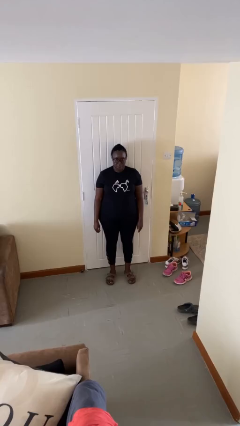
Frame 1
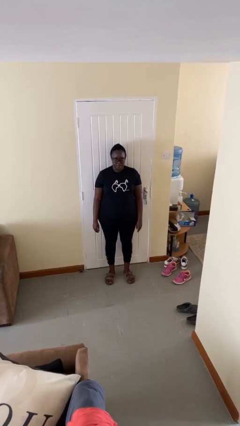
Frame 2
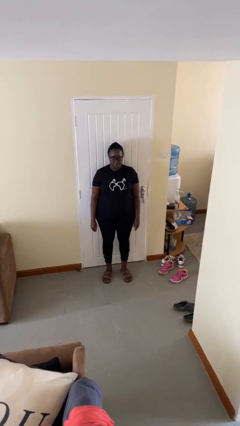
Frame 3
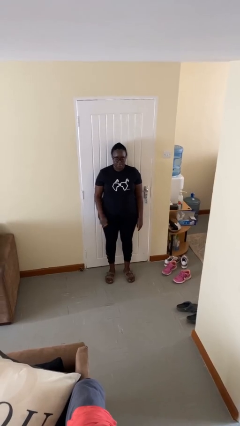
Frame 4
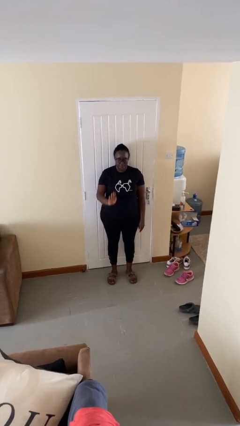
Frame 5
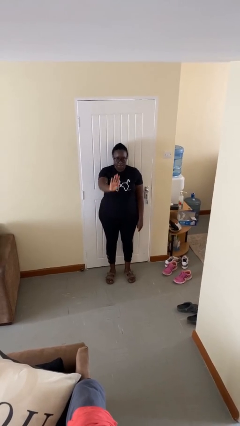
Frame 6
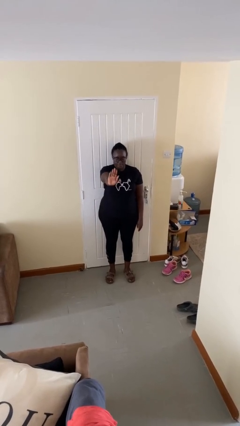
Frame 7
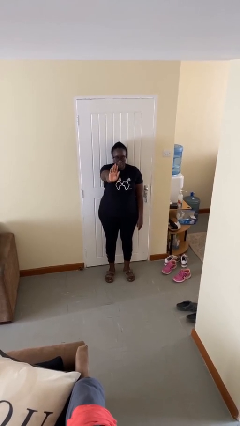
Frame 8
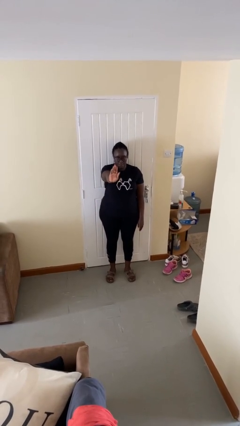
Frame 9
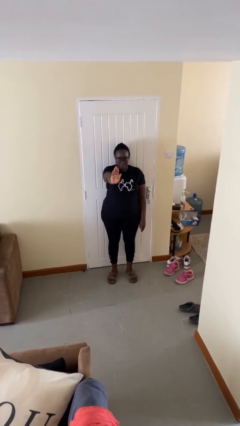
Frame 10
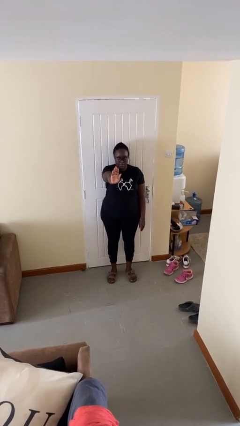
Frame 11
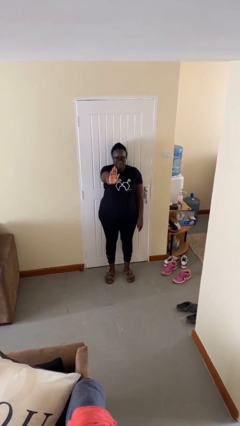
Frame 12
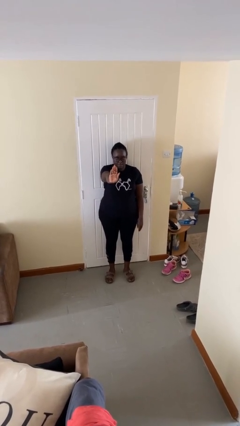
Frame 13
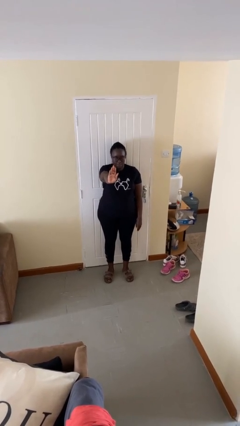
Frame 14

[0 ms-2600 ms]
person gestures stop

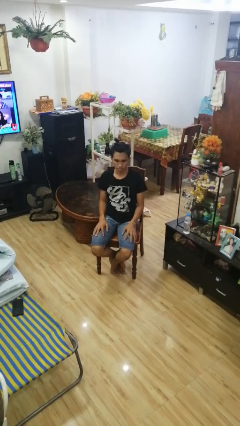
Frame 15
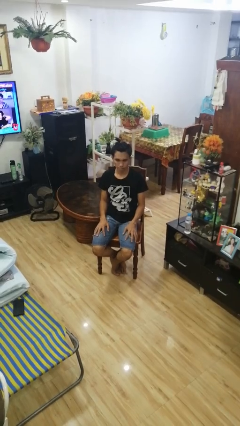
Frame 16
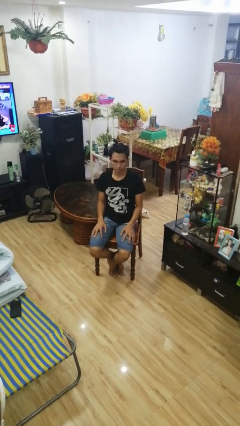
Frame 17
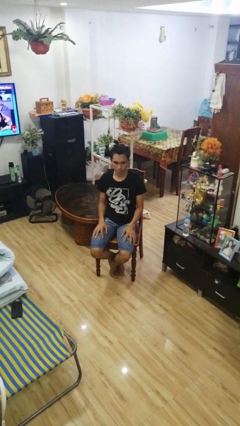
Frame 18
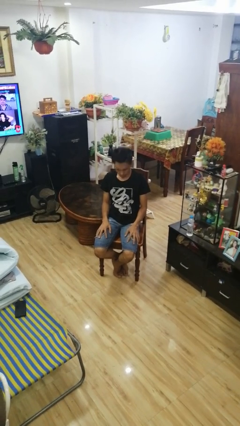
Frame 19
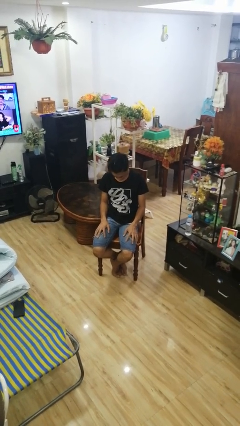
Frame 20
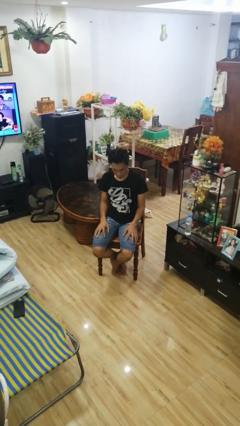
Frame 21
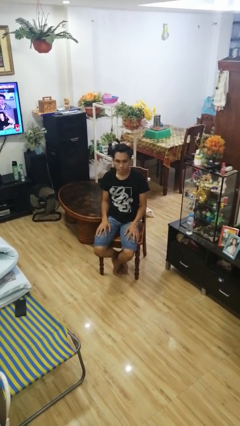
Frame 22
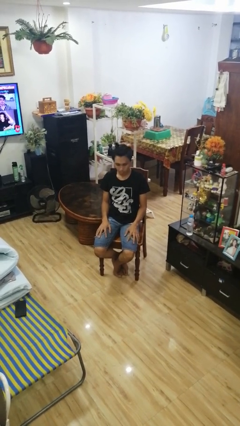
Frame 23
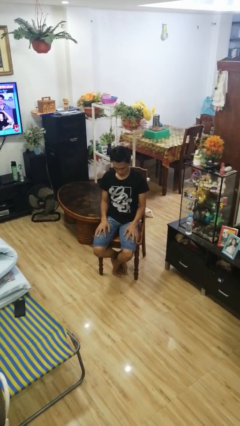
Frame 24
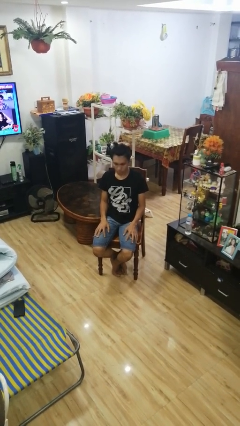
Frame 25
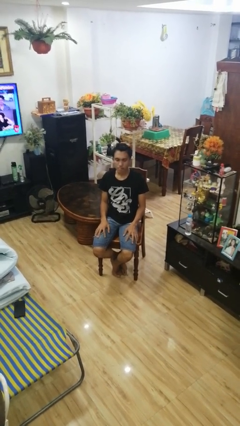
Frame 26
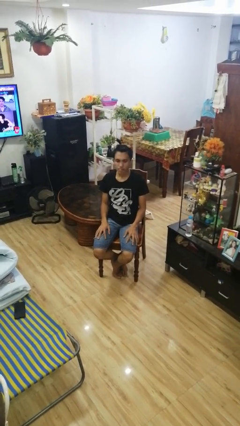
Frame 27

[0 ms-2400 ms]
person nods head

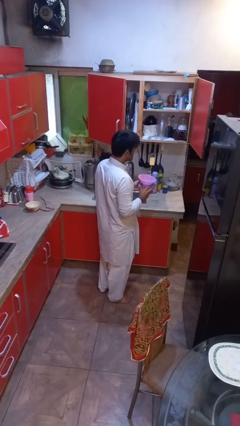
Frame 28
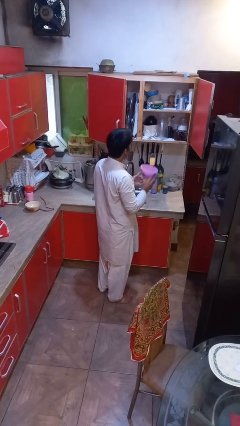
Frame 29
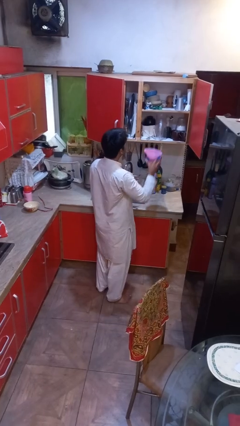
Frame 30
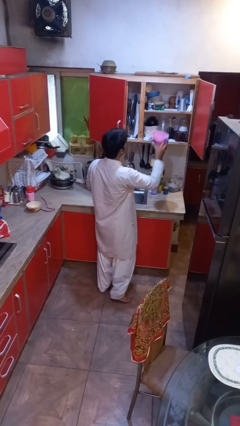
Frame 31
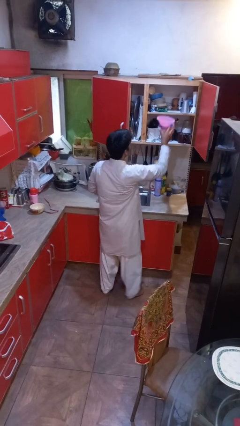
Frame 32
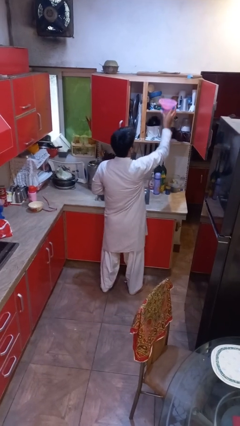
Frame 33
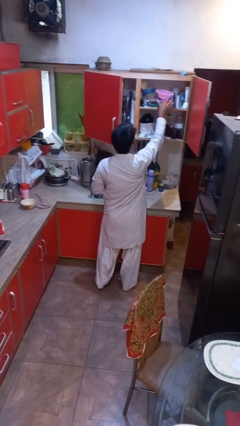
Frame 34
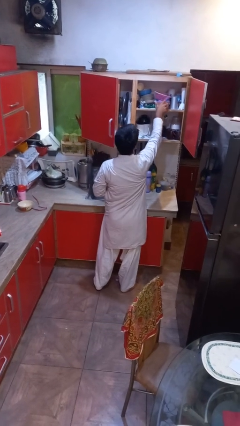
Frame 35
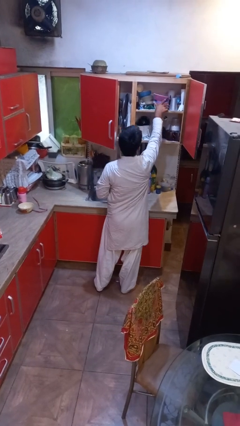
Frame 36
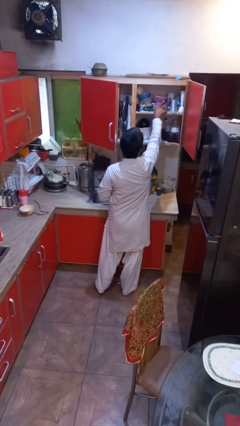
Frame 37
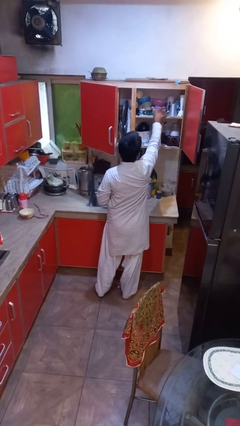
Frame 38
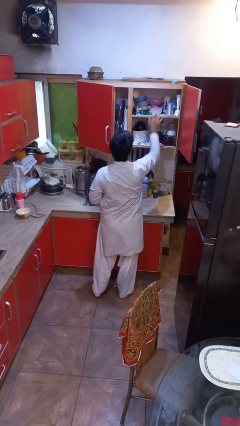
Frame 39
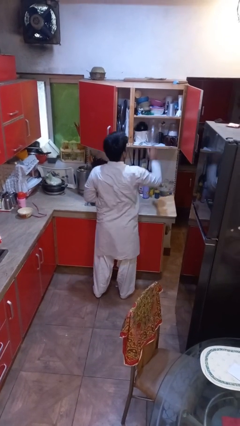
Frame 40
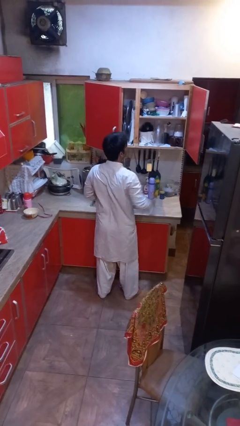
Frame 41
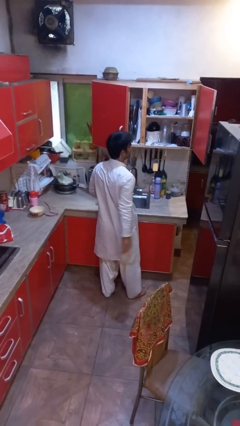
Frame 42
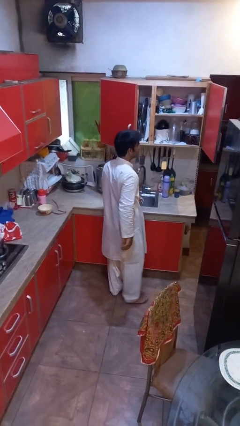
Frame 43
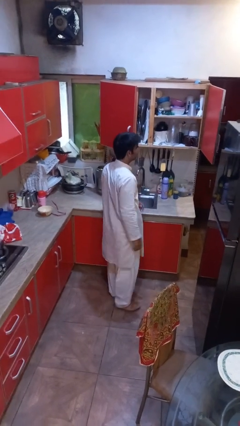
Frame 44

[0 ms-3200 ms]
person puts down object into cabinet

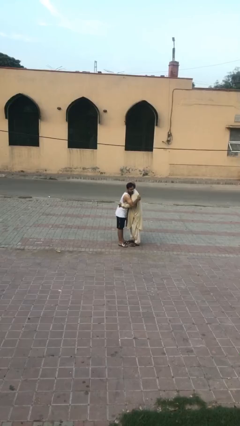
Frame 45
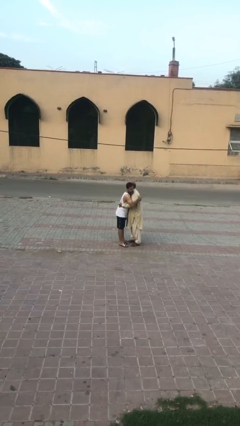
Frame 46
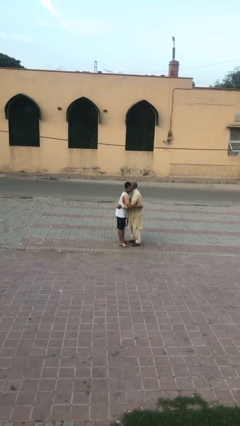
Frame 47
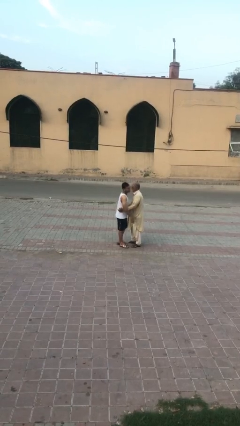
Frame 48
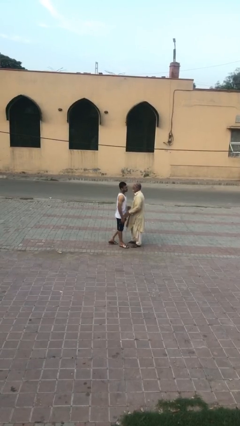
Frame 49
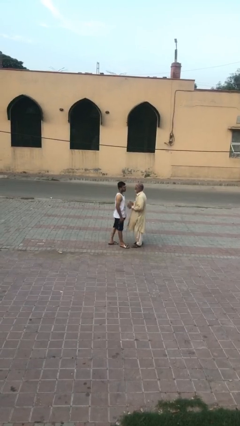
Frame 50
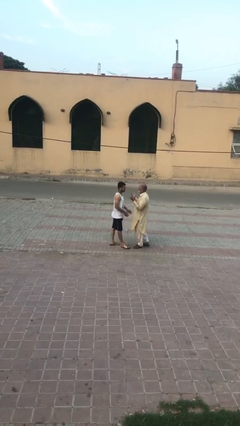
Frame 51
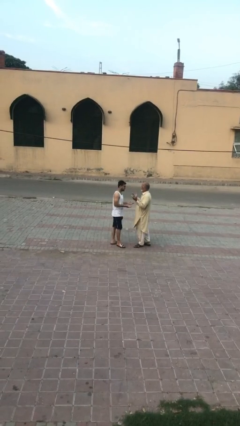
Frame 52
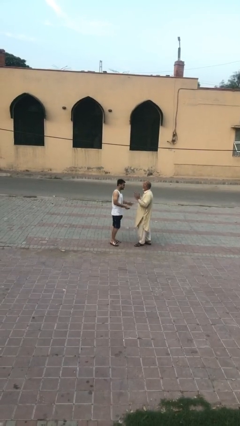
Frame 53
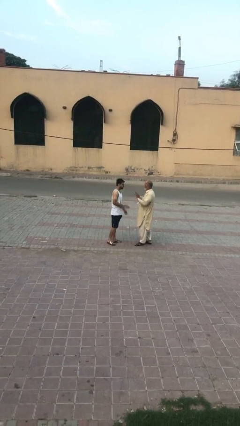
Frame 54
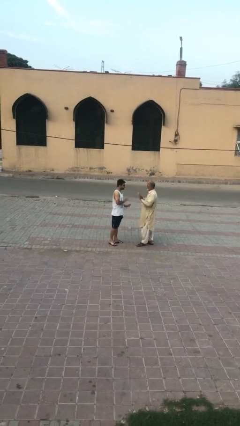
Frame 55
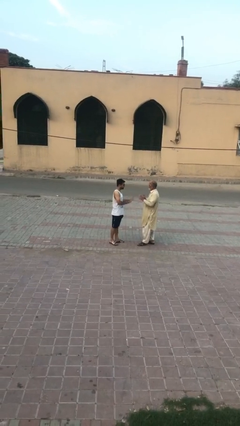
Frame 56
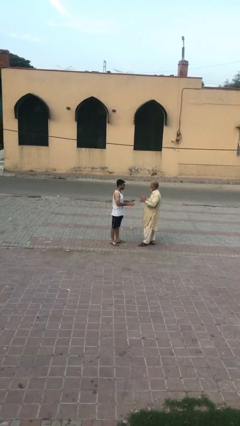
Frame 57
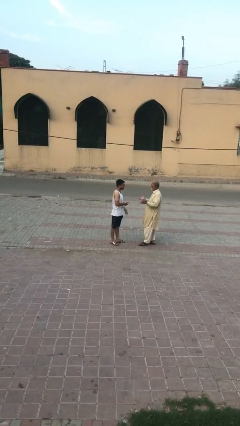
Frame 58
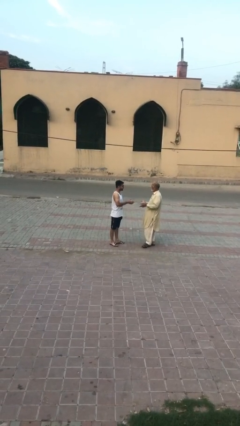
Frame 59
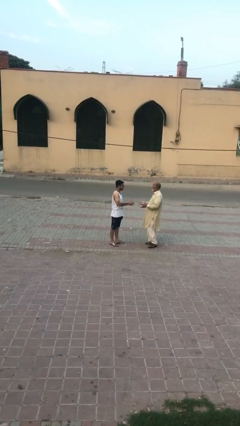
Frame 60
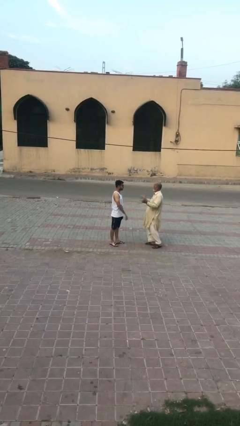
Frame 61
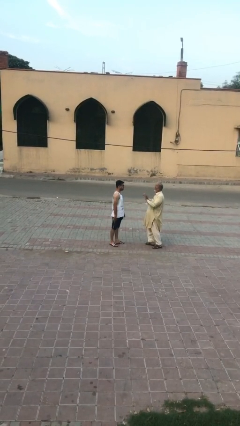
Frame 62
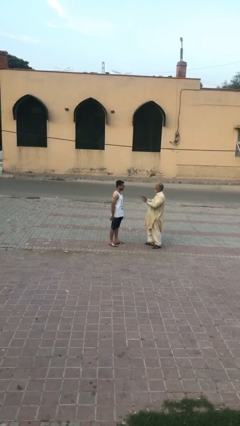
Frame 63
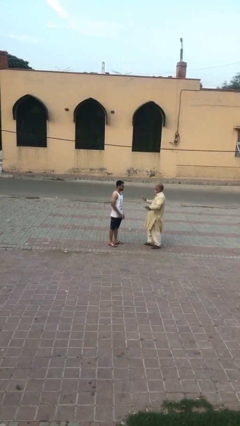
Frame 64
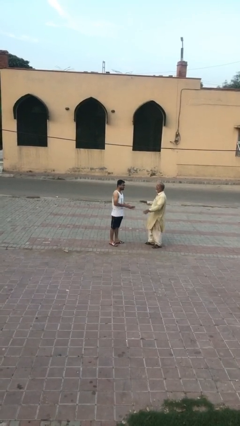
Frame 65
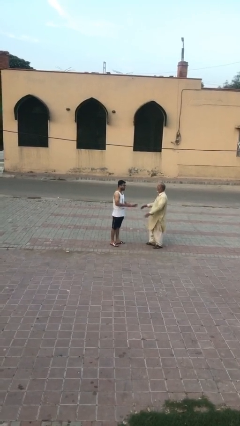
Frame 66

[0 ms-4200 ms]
person talks to person

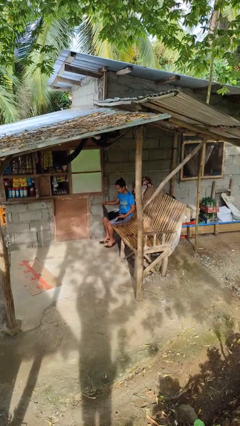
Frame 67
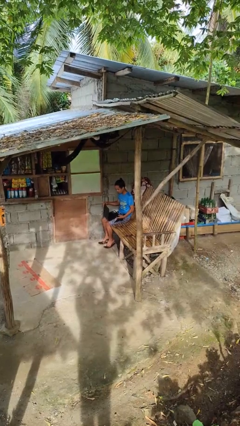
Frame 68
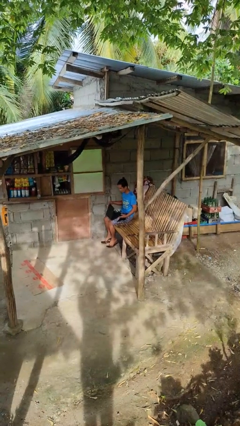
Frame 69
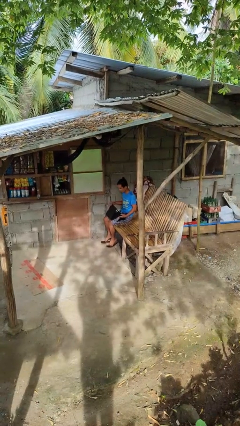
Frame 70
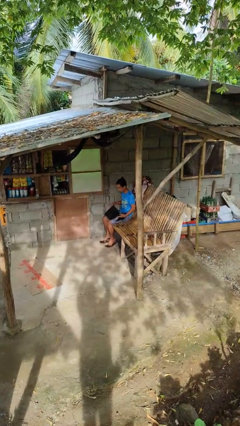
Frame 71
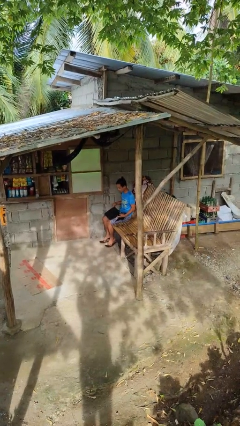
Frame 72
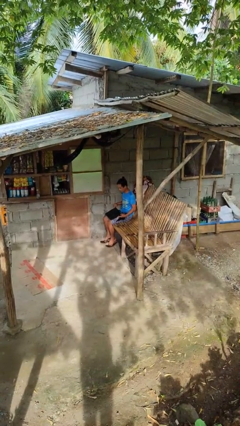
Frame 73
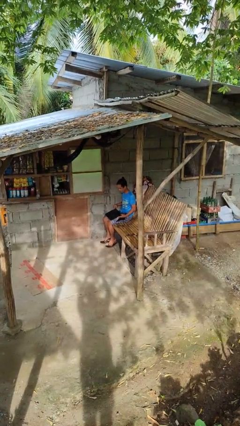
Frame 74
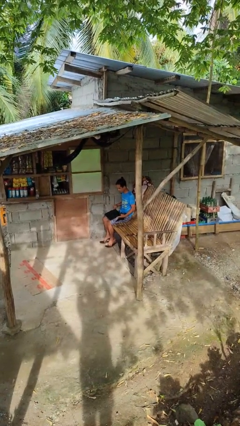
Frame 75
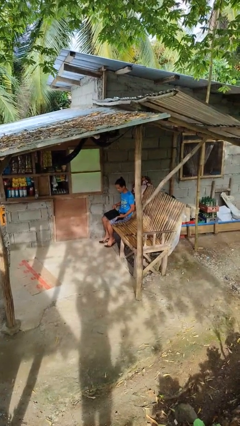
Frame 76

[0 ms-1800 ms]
person closes laptop

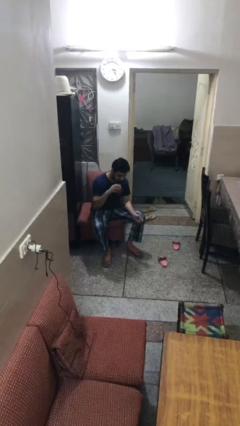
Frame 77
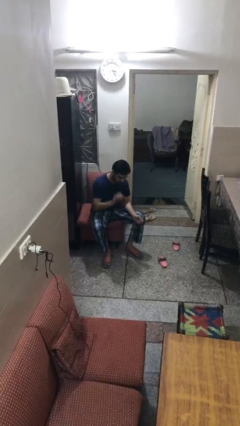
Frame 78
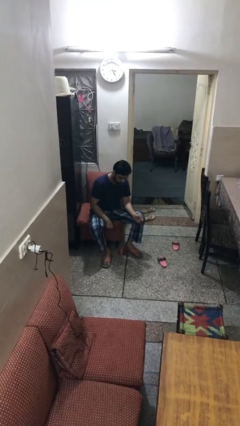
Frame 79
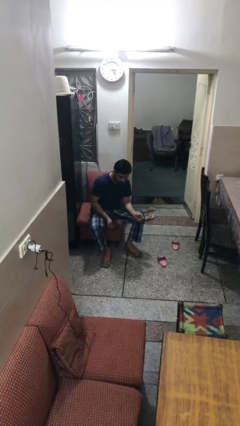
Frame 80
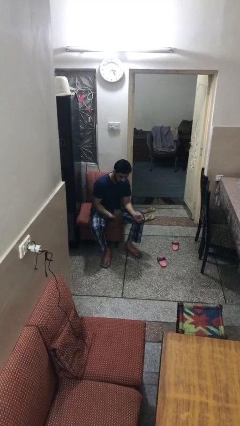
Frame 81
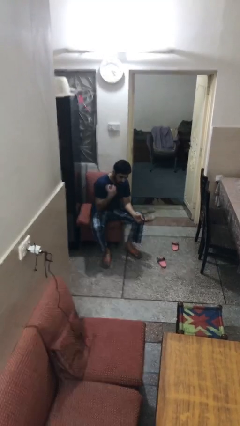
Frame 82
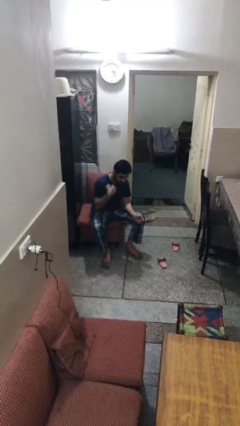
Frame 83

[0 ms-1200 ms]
person bounces ball on floor

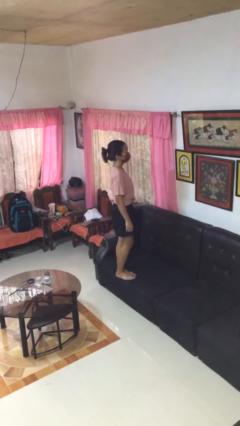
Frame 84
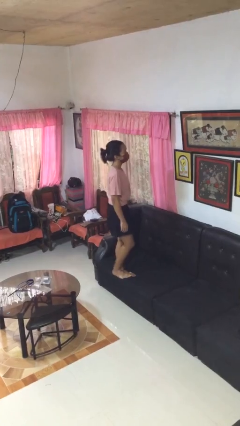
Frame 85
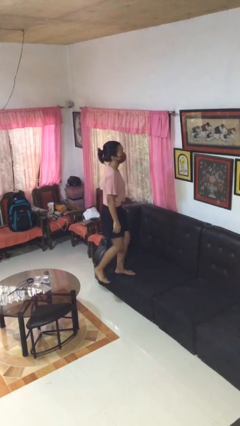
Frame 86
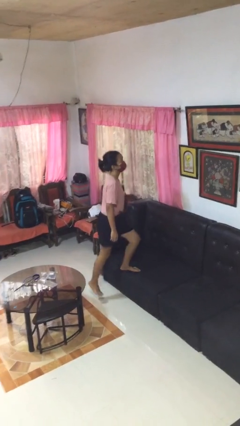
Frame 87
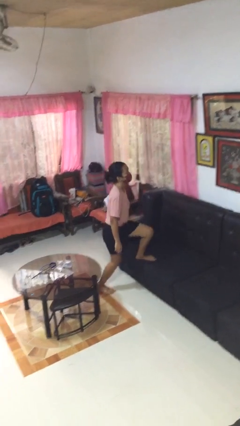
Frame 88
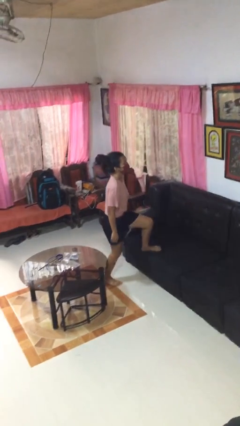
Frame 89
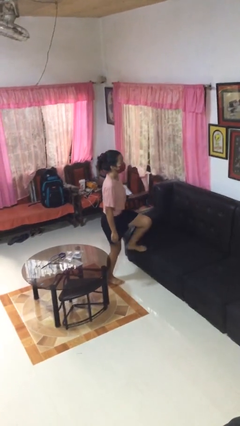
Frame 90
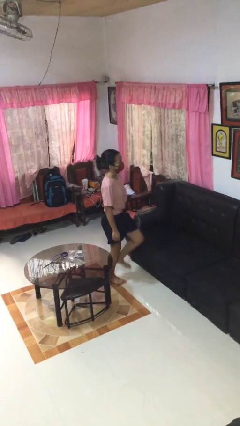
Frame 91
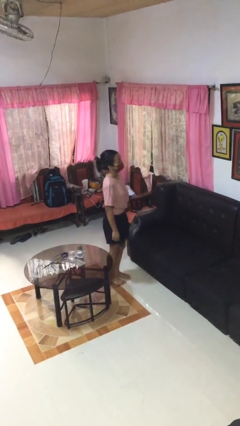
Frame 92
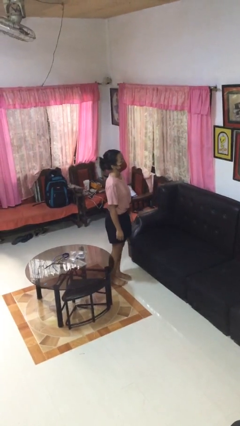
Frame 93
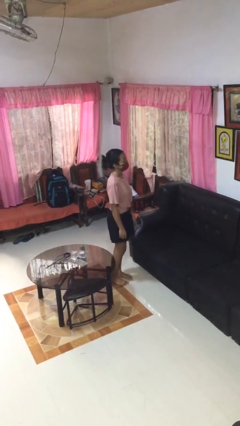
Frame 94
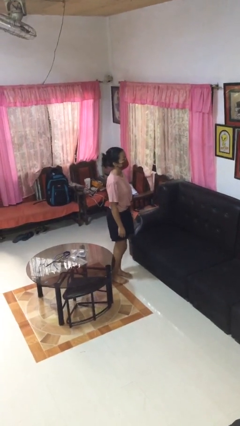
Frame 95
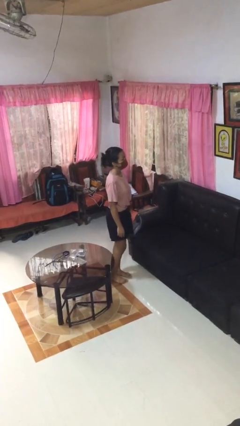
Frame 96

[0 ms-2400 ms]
person climbs off couch
